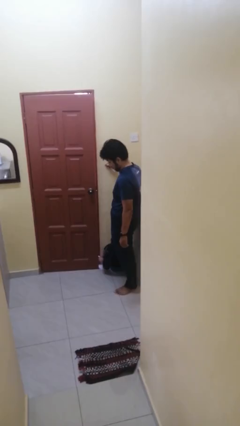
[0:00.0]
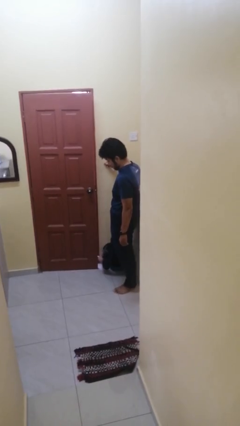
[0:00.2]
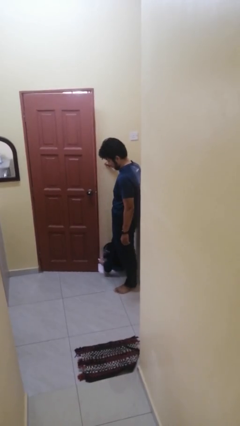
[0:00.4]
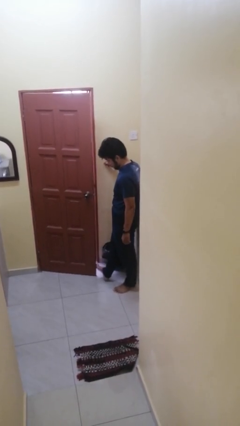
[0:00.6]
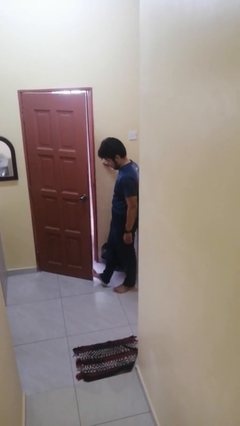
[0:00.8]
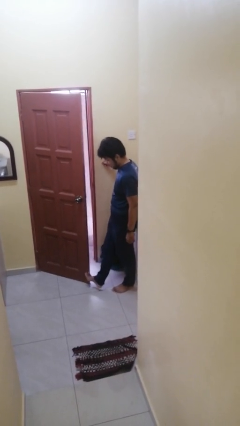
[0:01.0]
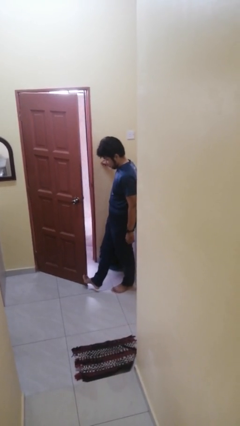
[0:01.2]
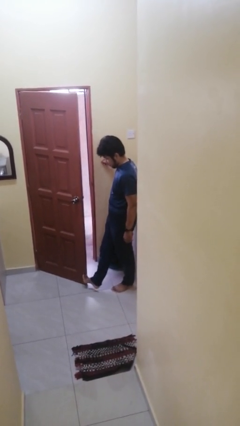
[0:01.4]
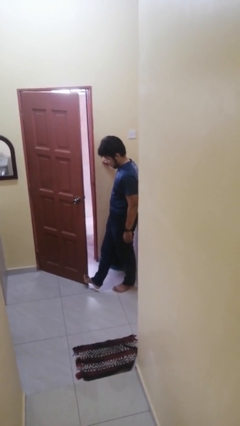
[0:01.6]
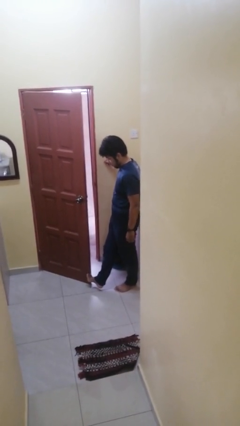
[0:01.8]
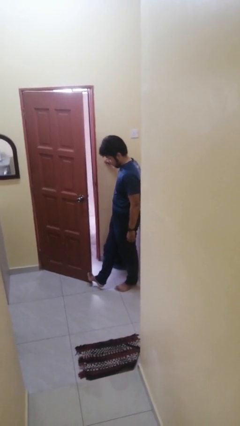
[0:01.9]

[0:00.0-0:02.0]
person opens facility door

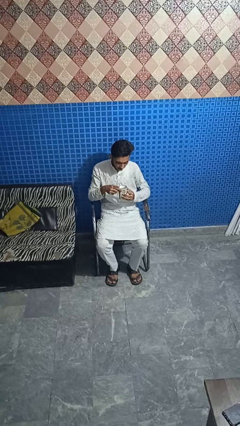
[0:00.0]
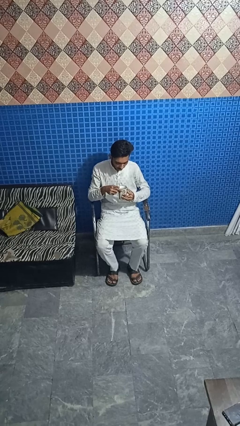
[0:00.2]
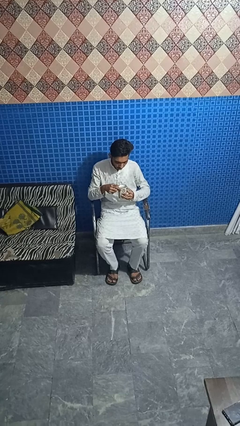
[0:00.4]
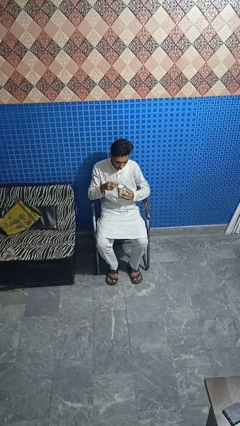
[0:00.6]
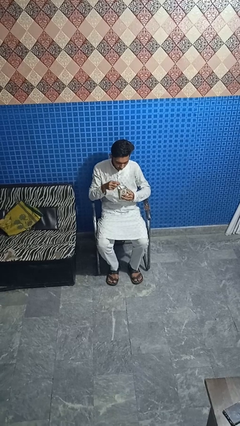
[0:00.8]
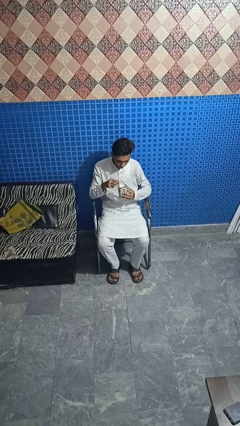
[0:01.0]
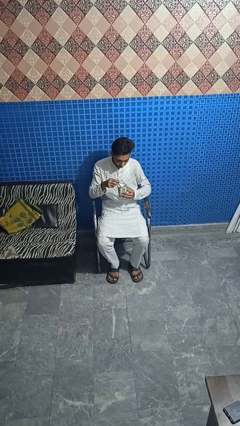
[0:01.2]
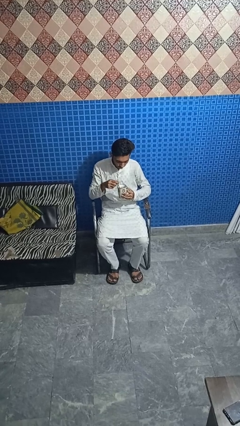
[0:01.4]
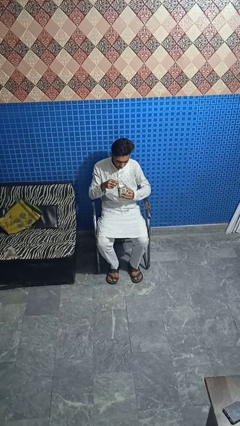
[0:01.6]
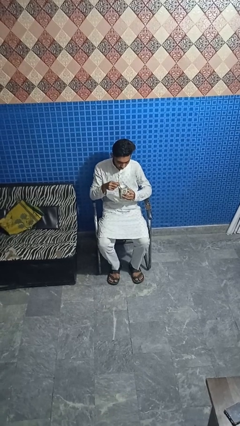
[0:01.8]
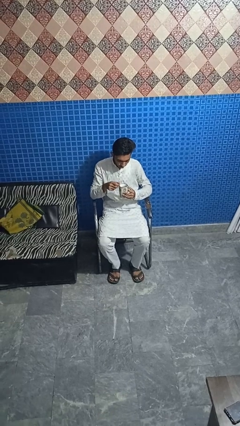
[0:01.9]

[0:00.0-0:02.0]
person stirs mug

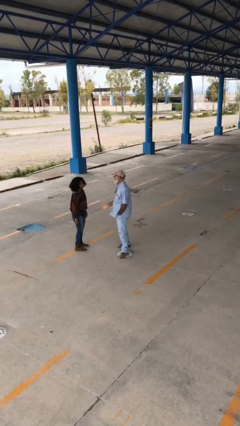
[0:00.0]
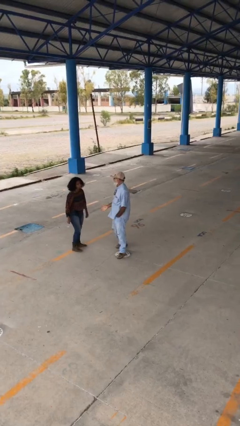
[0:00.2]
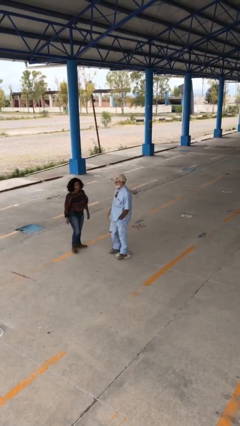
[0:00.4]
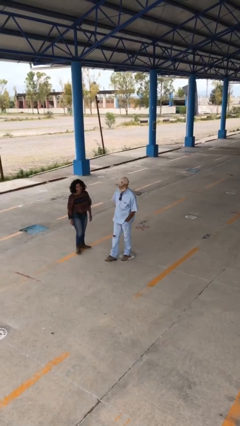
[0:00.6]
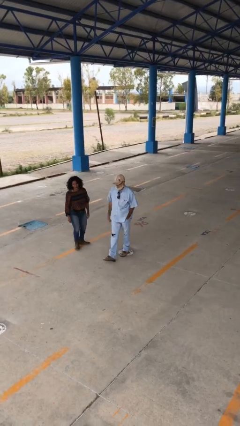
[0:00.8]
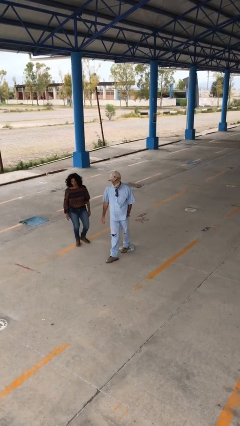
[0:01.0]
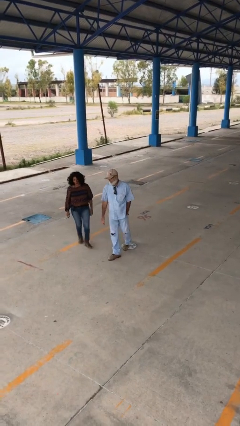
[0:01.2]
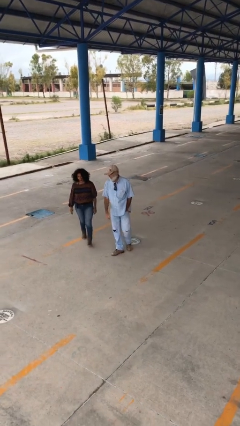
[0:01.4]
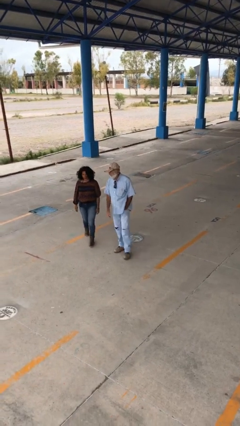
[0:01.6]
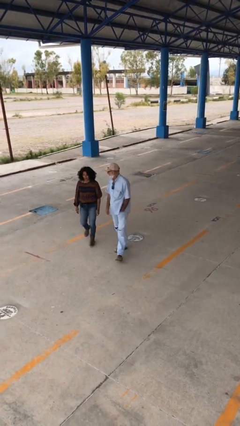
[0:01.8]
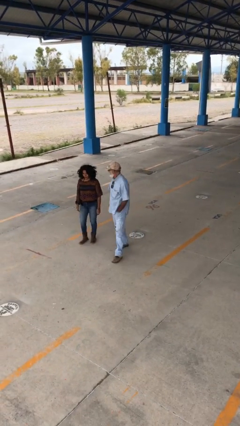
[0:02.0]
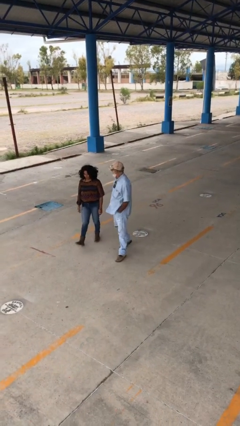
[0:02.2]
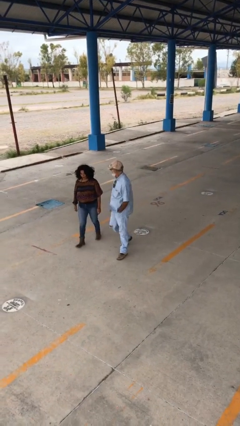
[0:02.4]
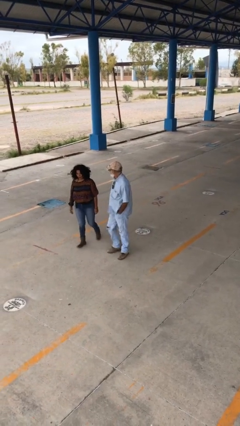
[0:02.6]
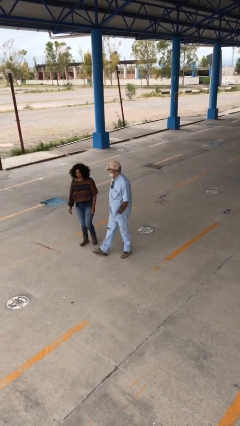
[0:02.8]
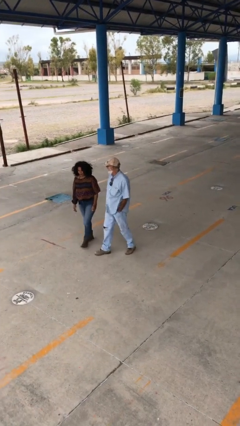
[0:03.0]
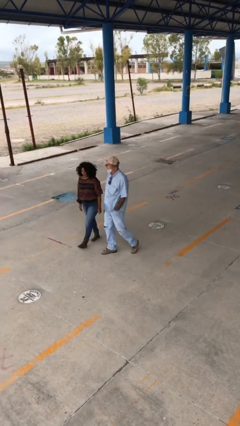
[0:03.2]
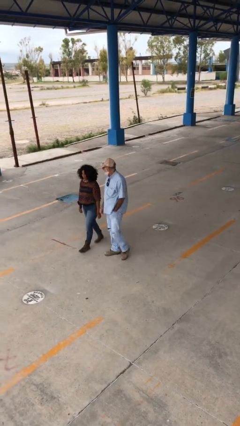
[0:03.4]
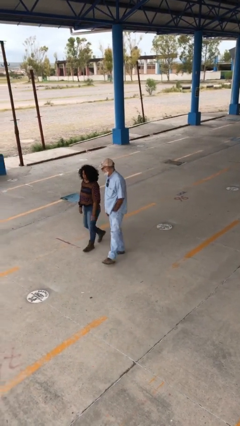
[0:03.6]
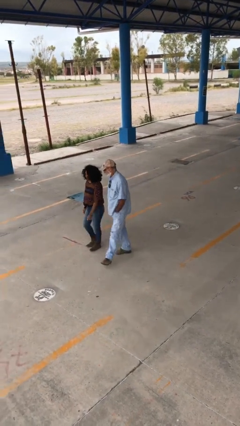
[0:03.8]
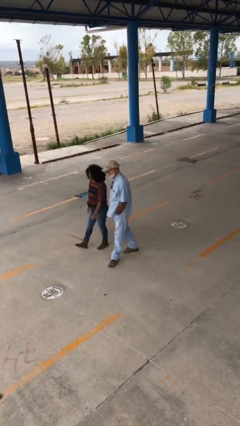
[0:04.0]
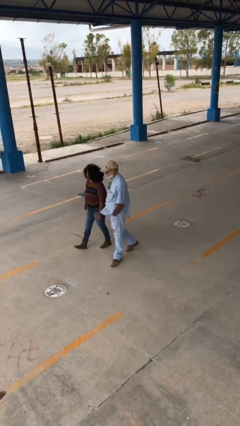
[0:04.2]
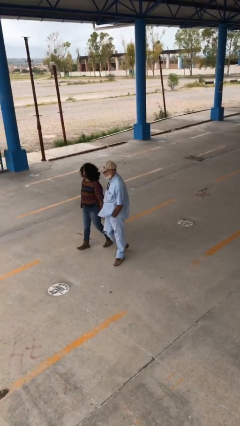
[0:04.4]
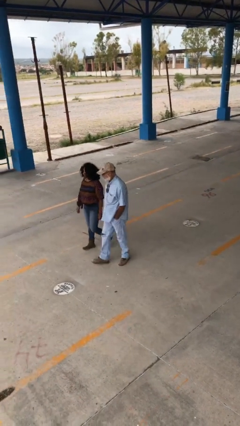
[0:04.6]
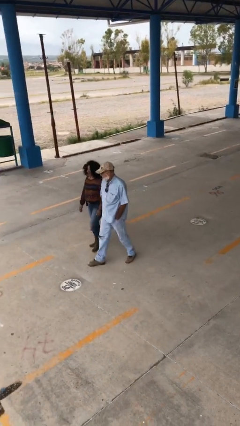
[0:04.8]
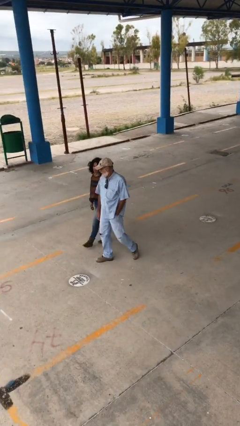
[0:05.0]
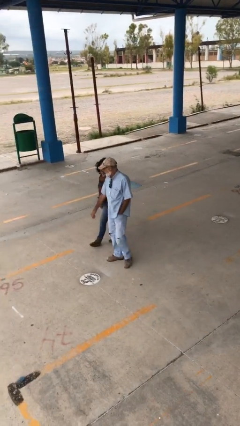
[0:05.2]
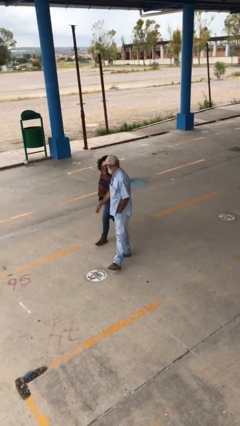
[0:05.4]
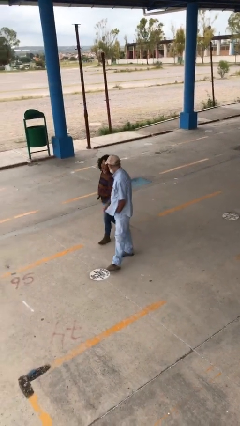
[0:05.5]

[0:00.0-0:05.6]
person talks to person

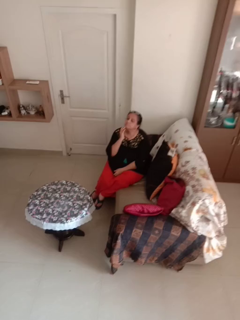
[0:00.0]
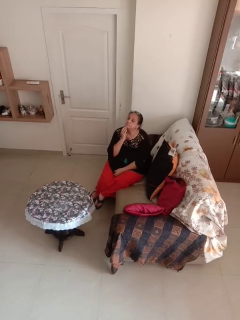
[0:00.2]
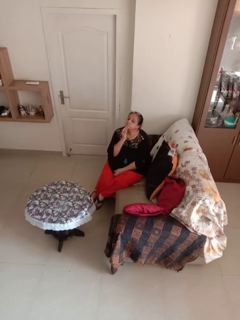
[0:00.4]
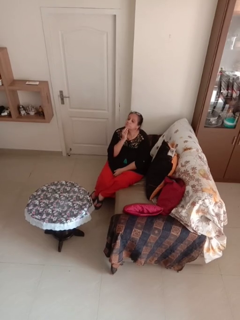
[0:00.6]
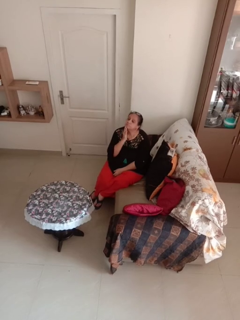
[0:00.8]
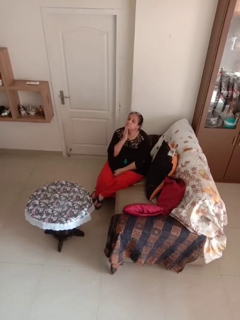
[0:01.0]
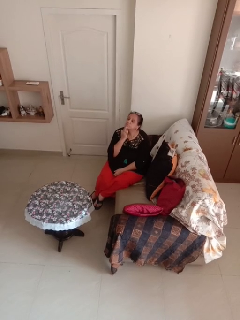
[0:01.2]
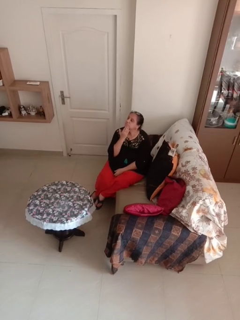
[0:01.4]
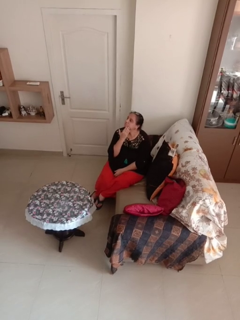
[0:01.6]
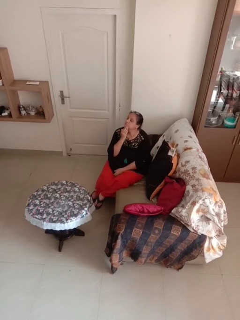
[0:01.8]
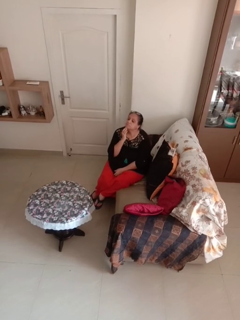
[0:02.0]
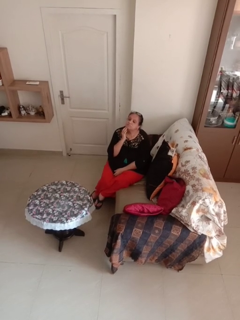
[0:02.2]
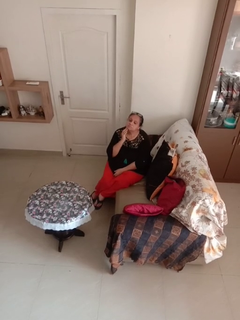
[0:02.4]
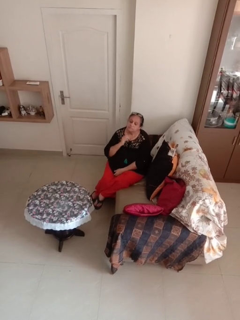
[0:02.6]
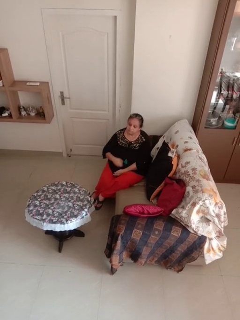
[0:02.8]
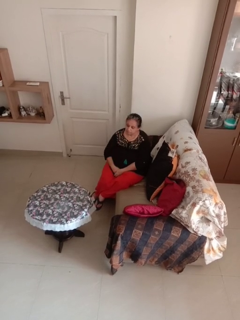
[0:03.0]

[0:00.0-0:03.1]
person strokes chin

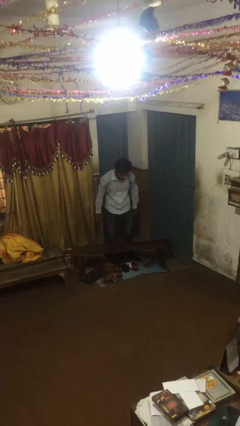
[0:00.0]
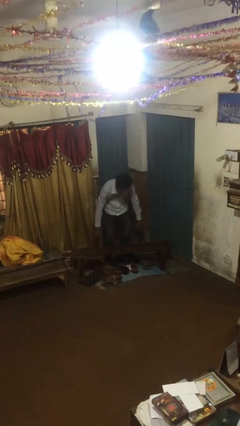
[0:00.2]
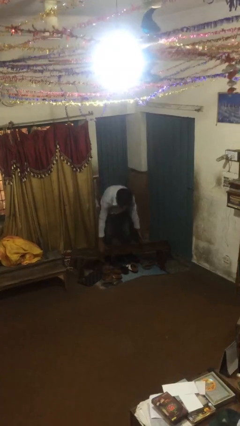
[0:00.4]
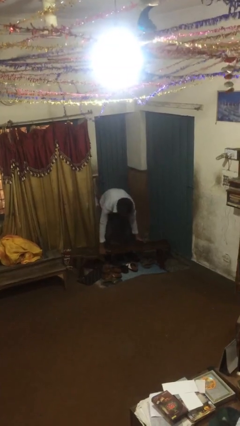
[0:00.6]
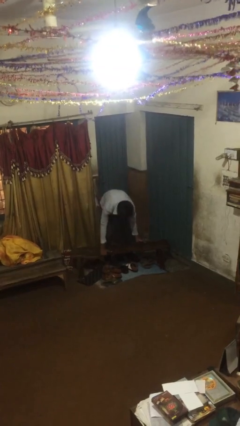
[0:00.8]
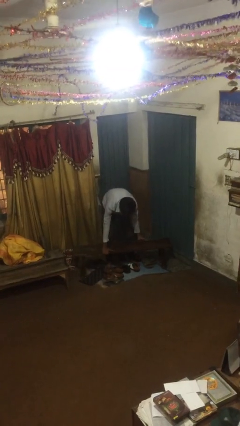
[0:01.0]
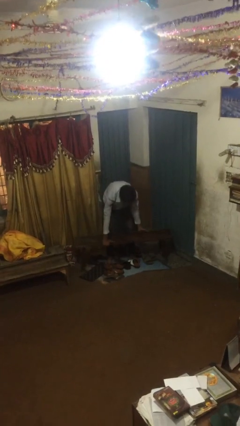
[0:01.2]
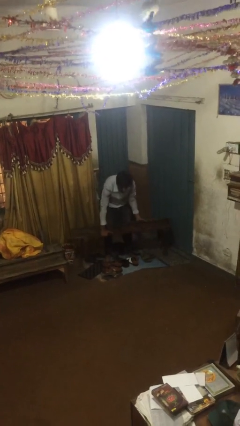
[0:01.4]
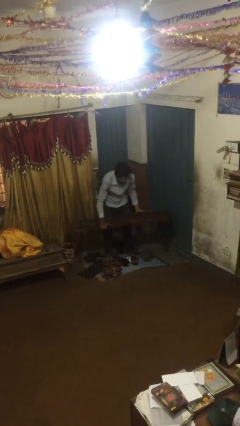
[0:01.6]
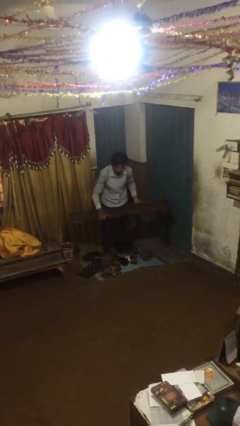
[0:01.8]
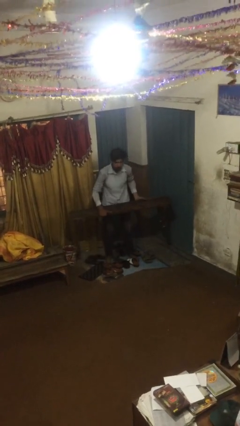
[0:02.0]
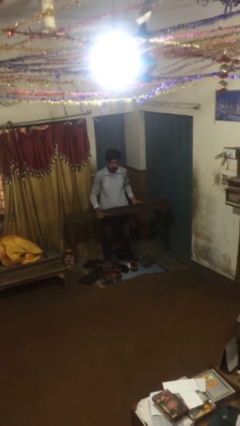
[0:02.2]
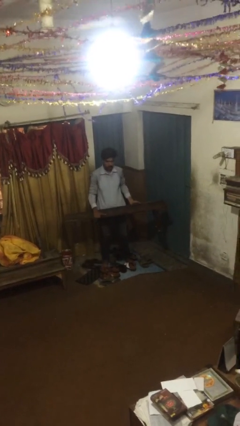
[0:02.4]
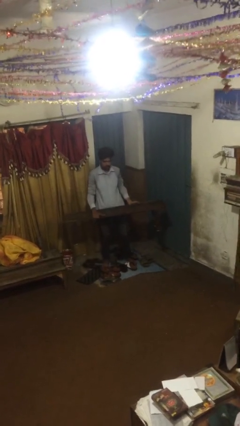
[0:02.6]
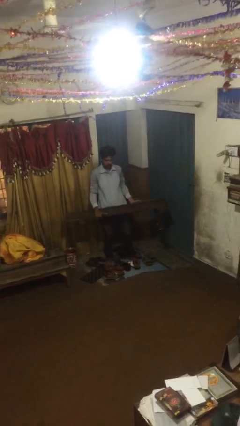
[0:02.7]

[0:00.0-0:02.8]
person picks up object from floor

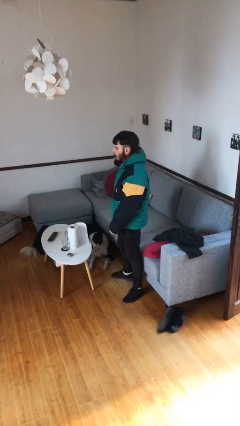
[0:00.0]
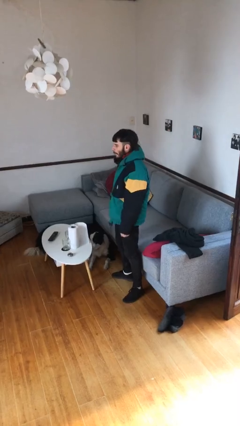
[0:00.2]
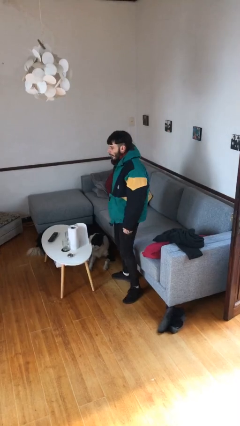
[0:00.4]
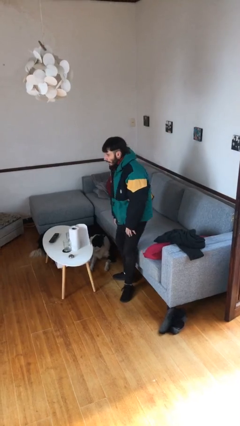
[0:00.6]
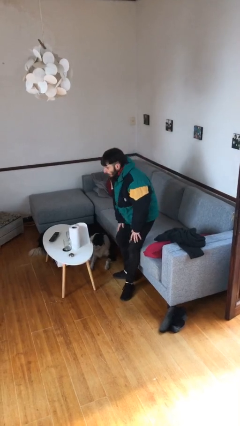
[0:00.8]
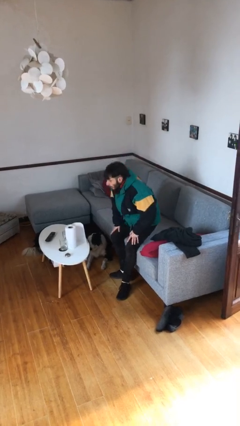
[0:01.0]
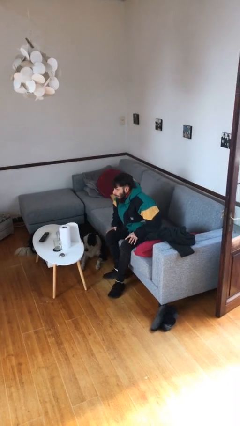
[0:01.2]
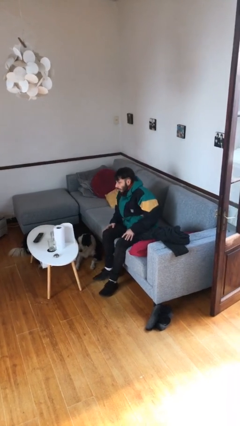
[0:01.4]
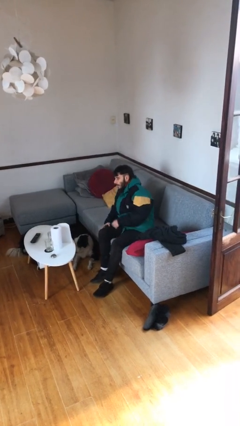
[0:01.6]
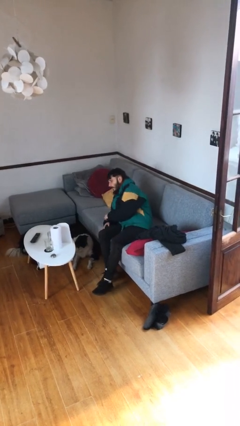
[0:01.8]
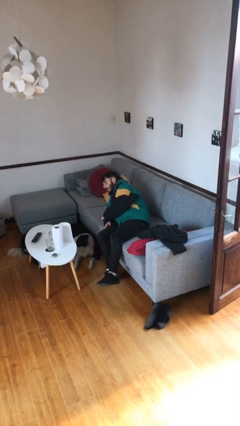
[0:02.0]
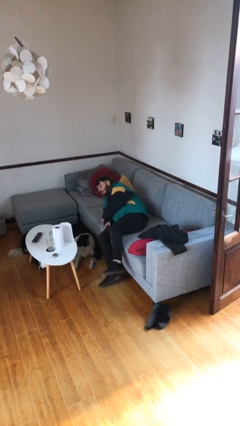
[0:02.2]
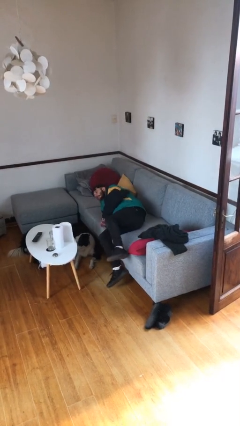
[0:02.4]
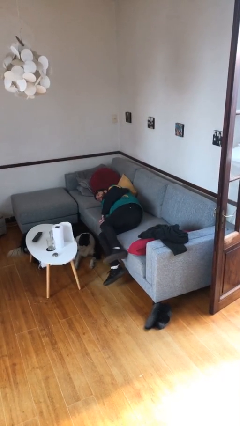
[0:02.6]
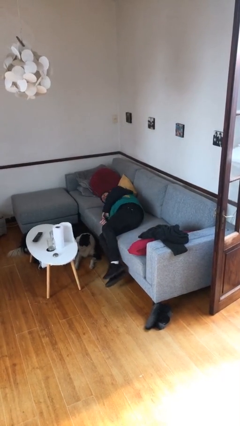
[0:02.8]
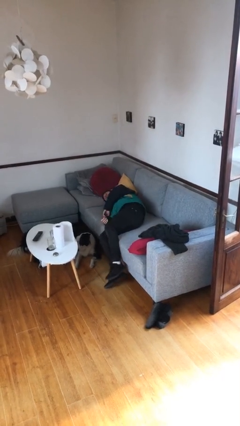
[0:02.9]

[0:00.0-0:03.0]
person lies down on couch
